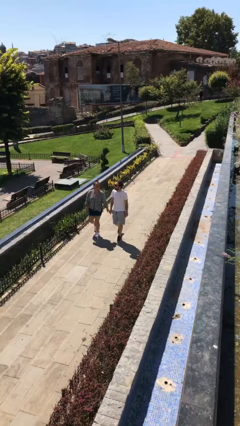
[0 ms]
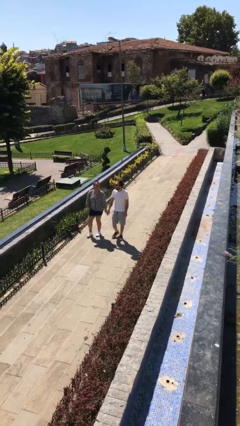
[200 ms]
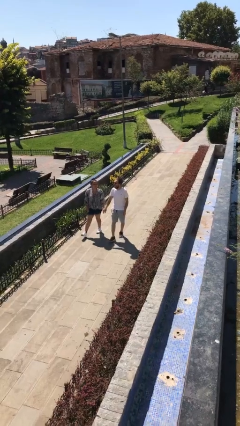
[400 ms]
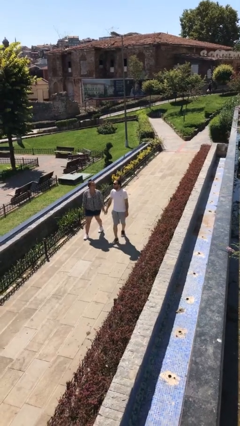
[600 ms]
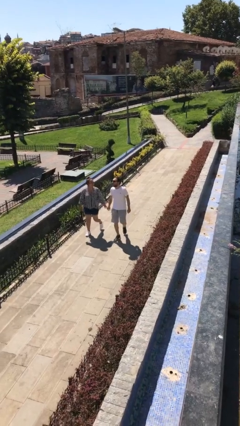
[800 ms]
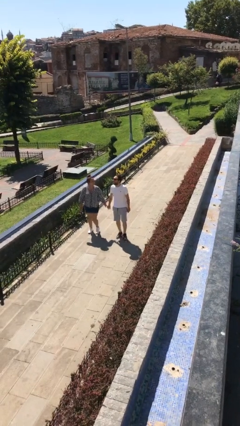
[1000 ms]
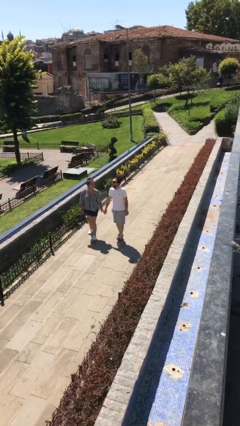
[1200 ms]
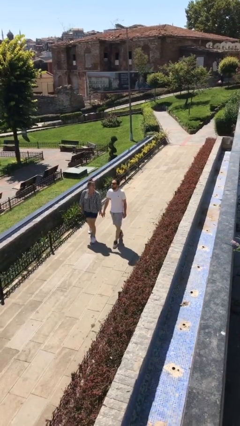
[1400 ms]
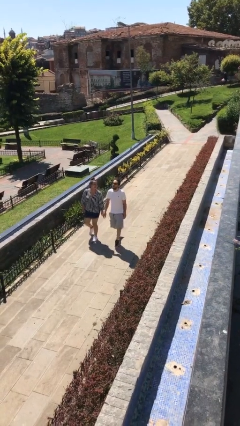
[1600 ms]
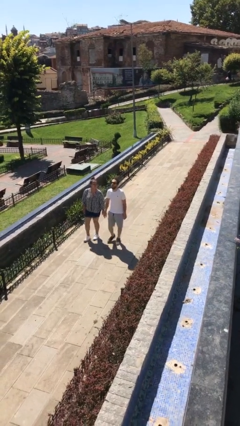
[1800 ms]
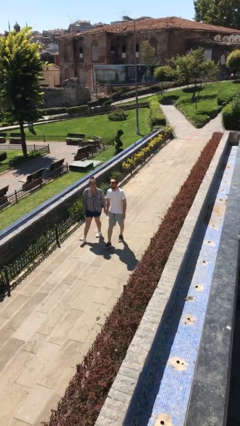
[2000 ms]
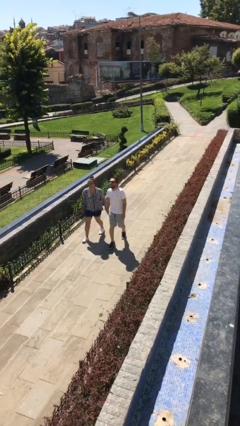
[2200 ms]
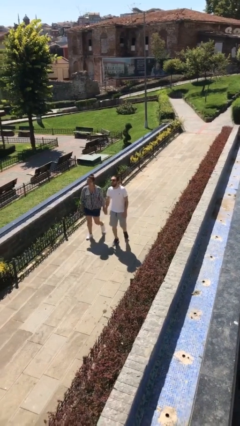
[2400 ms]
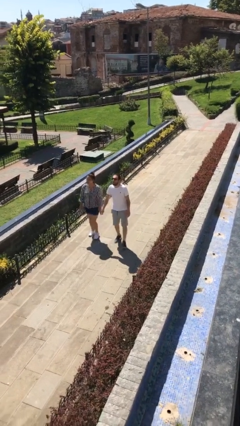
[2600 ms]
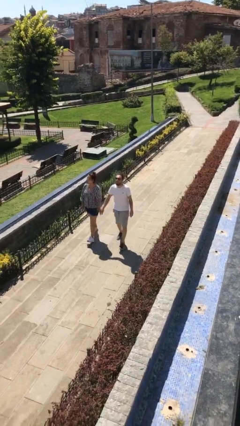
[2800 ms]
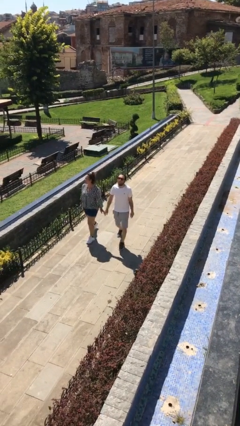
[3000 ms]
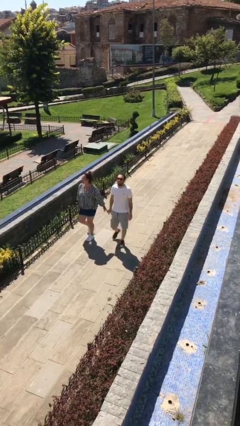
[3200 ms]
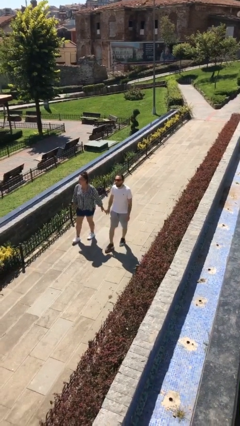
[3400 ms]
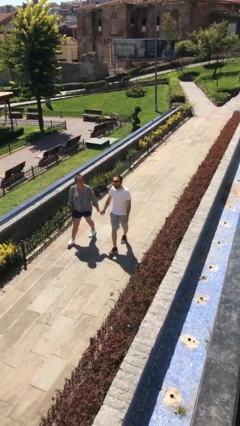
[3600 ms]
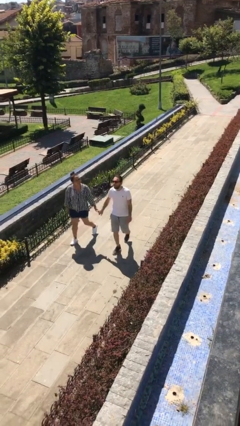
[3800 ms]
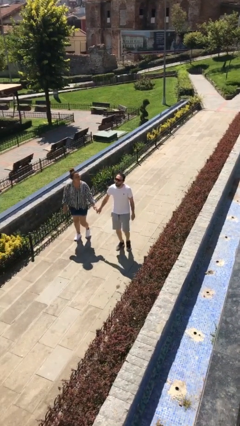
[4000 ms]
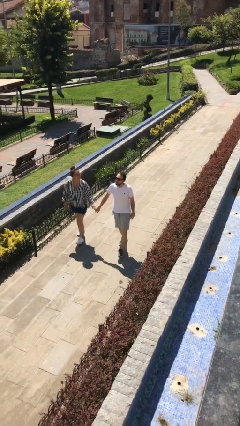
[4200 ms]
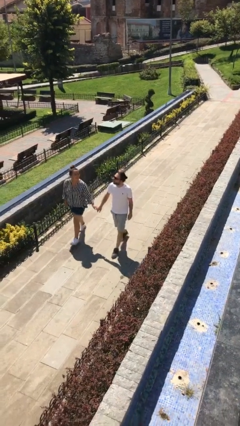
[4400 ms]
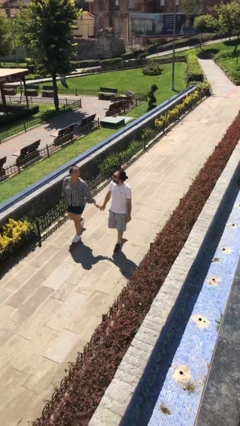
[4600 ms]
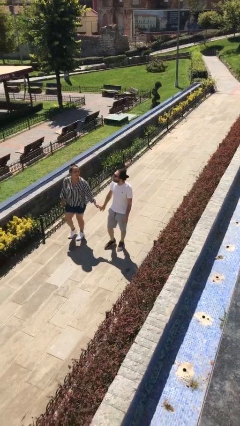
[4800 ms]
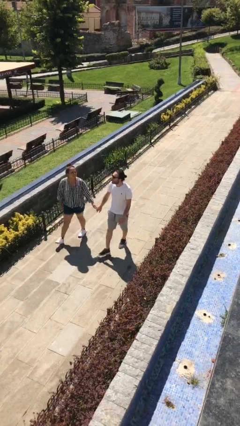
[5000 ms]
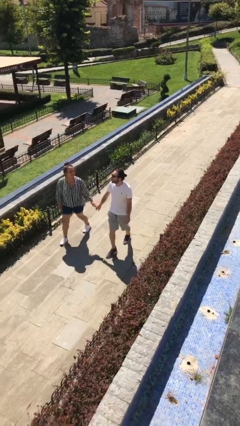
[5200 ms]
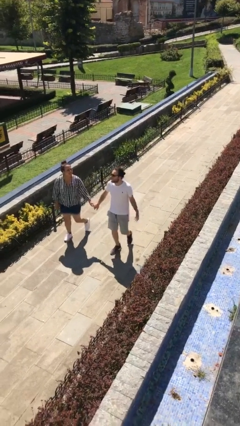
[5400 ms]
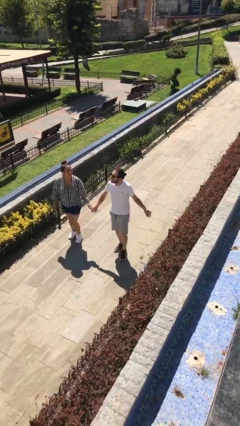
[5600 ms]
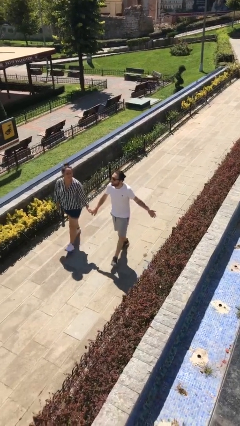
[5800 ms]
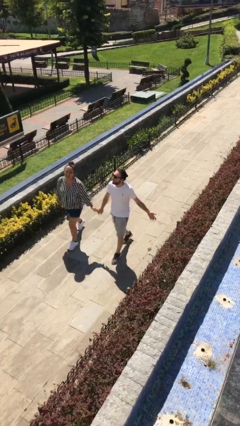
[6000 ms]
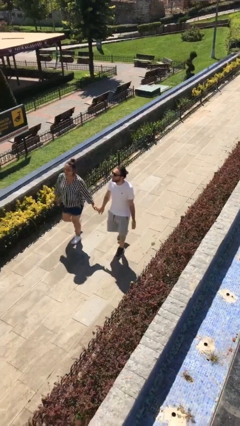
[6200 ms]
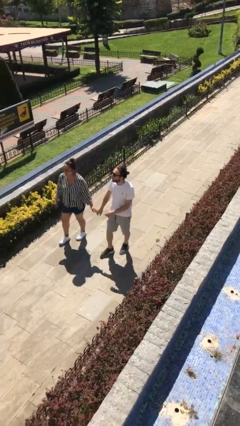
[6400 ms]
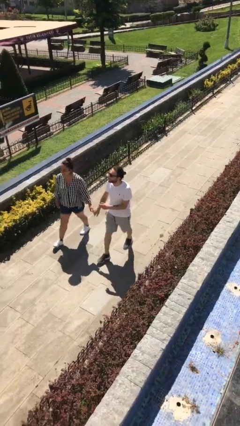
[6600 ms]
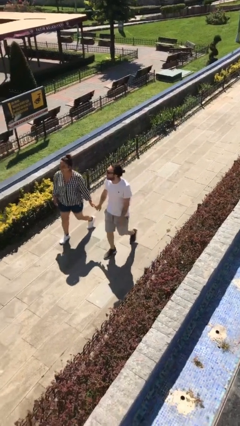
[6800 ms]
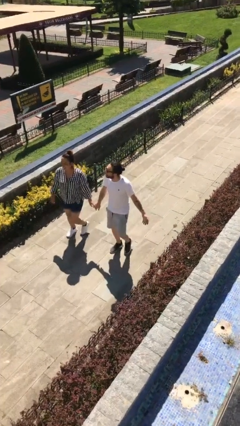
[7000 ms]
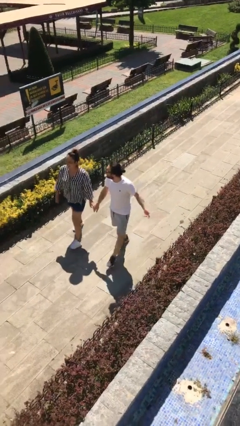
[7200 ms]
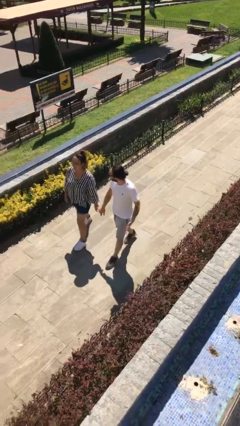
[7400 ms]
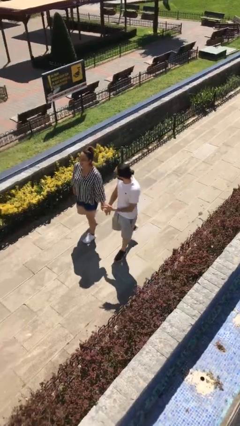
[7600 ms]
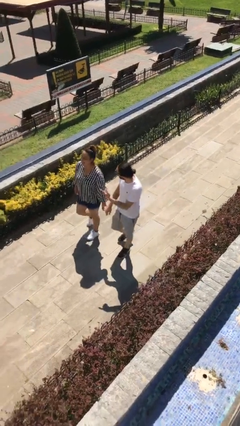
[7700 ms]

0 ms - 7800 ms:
person holds hand

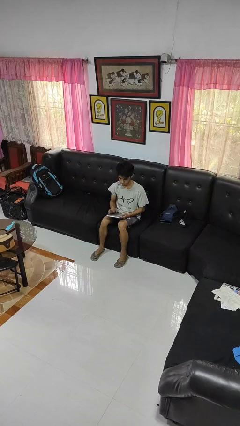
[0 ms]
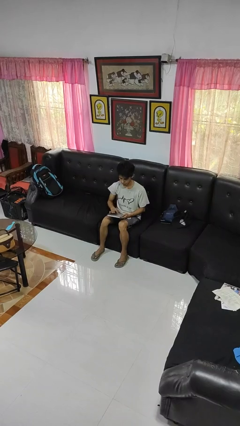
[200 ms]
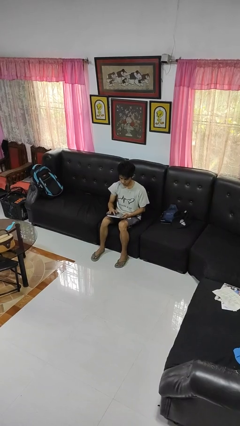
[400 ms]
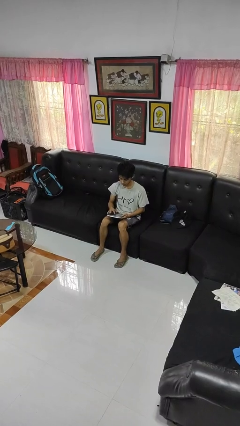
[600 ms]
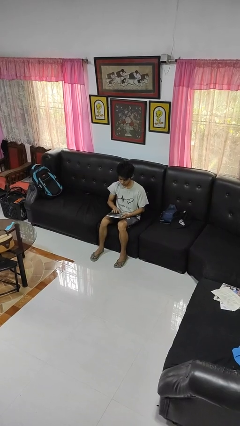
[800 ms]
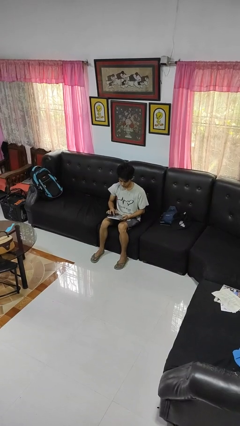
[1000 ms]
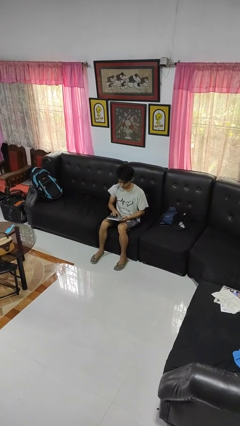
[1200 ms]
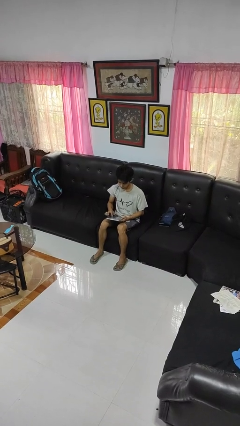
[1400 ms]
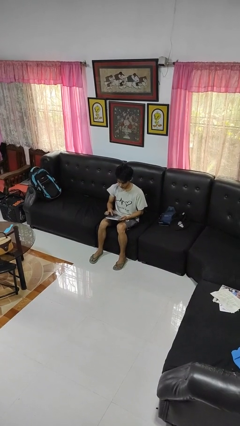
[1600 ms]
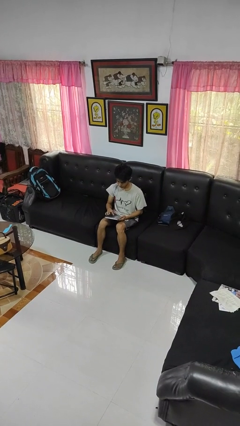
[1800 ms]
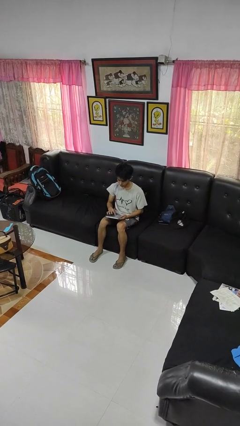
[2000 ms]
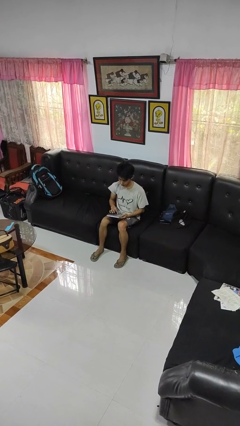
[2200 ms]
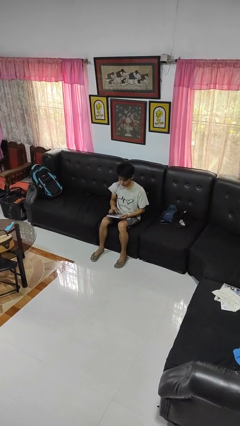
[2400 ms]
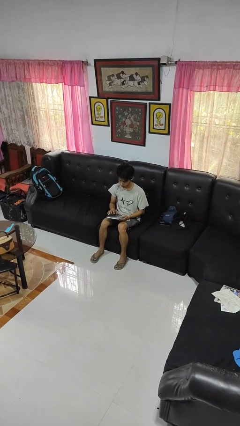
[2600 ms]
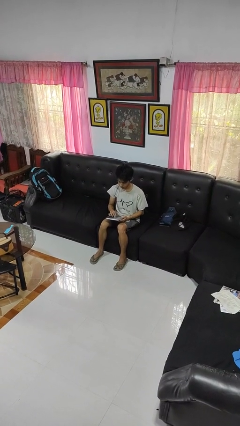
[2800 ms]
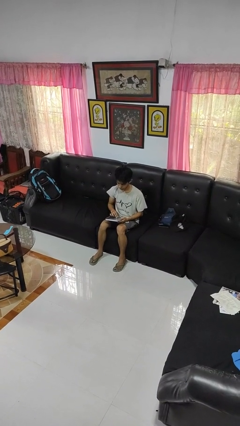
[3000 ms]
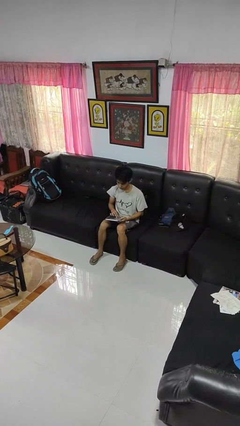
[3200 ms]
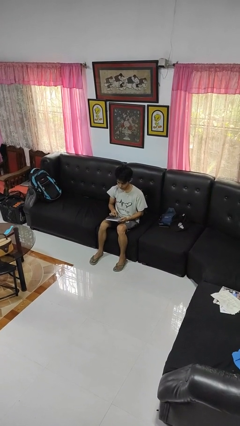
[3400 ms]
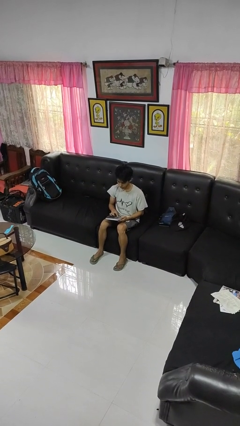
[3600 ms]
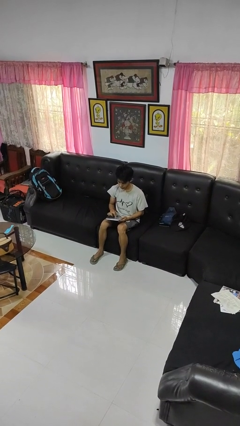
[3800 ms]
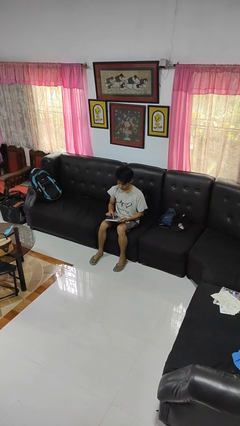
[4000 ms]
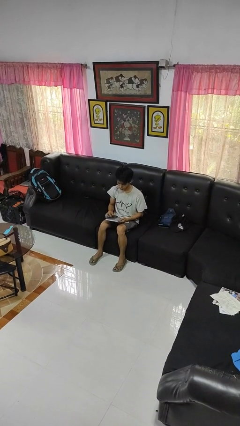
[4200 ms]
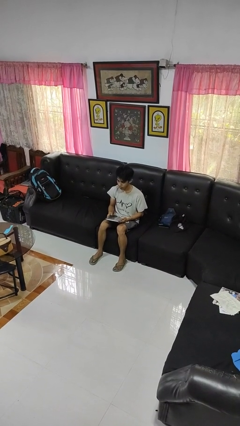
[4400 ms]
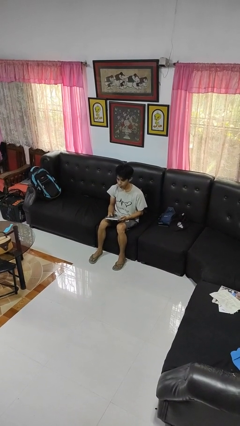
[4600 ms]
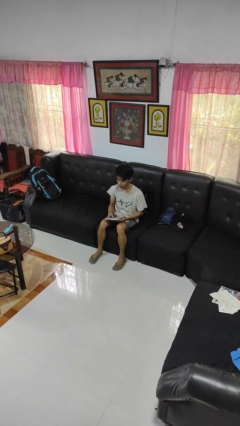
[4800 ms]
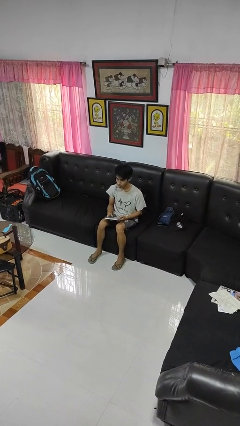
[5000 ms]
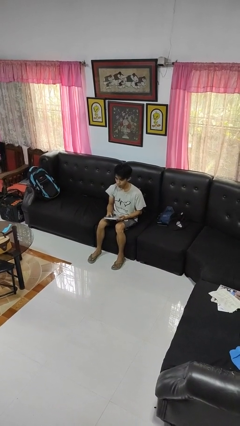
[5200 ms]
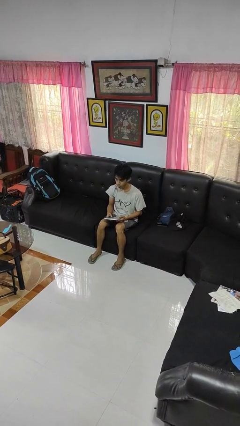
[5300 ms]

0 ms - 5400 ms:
person interacts with tablet

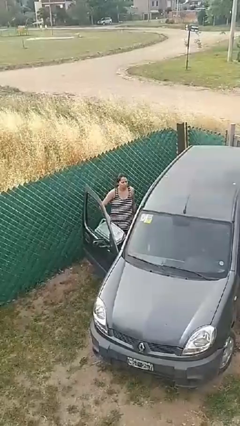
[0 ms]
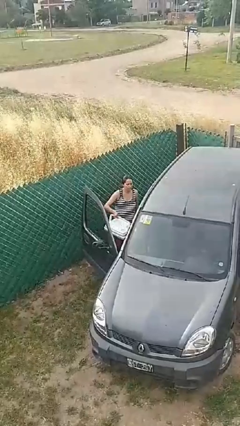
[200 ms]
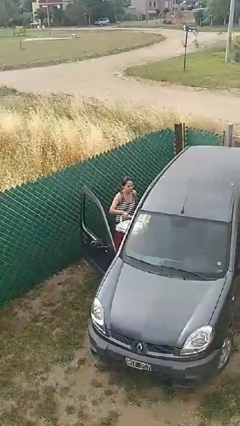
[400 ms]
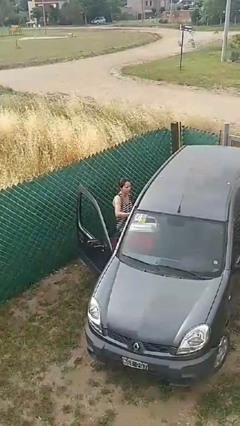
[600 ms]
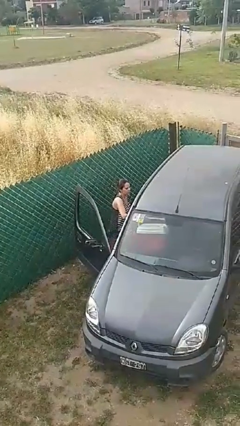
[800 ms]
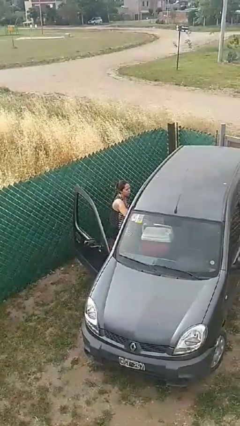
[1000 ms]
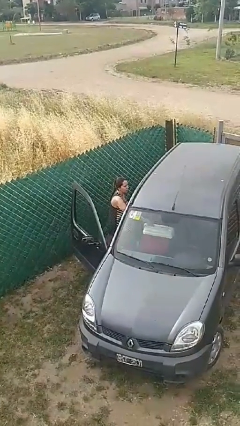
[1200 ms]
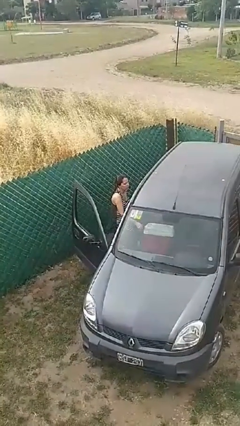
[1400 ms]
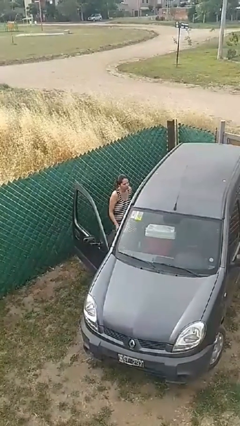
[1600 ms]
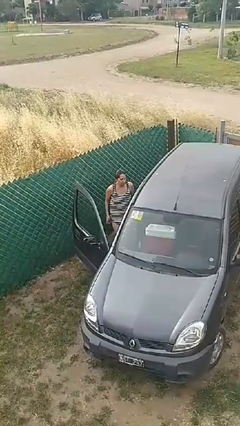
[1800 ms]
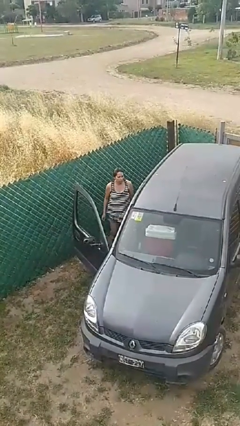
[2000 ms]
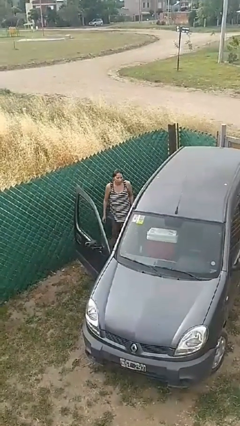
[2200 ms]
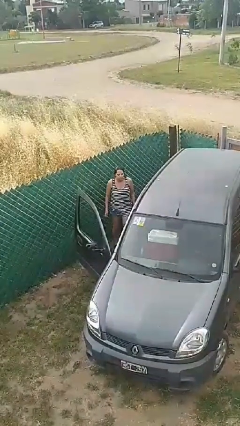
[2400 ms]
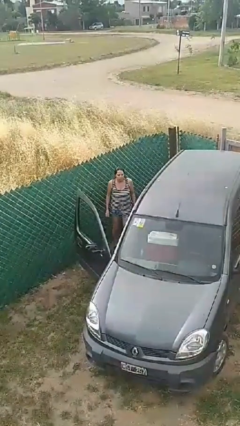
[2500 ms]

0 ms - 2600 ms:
person loads car

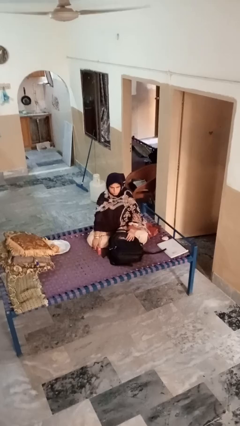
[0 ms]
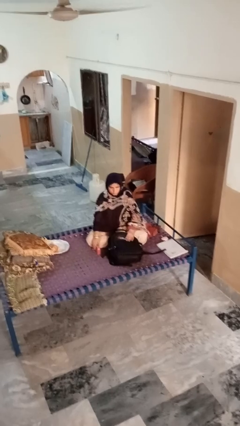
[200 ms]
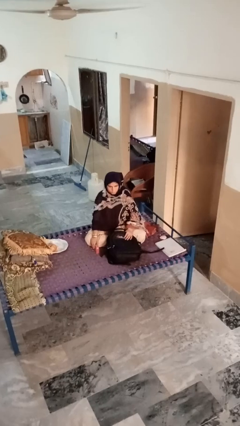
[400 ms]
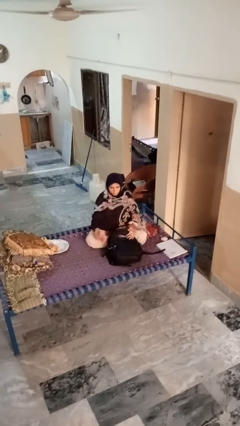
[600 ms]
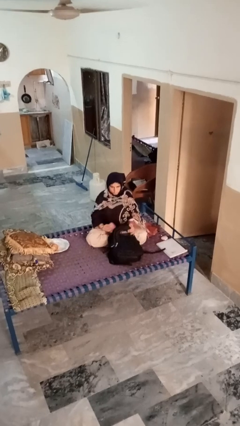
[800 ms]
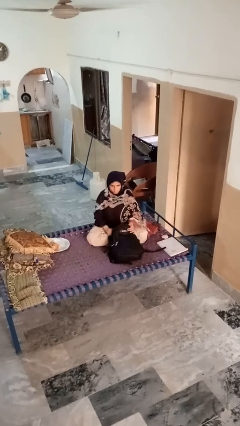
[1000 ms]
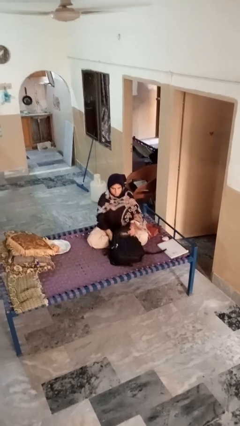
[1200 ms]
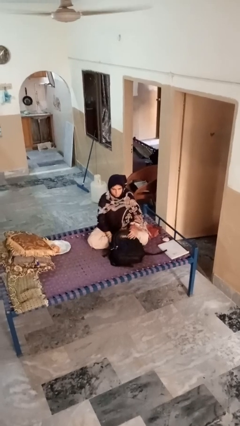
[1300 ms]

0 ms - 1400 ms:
person puts object into bag

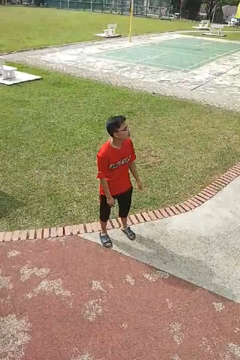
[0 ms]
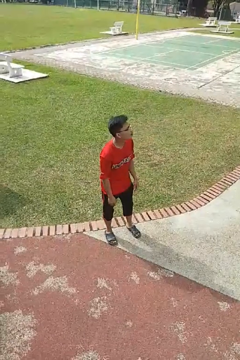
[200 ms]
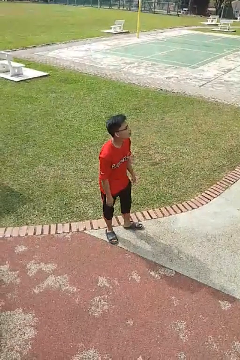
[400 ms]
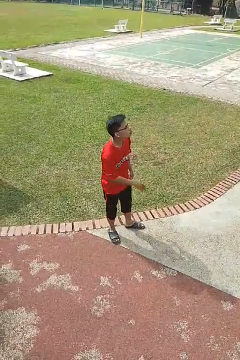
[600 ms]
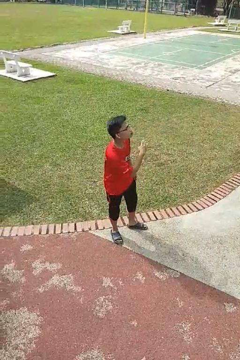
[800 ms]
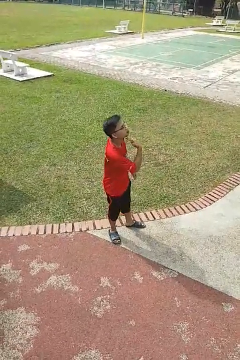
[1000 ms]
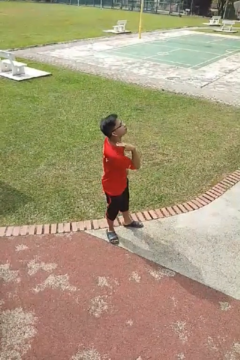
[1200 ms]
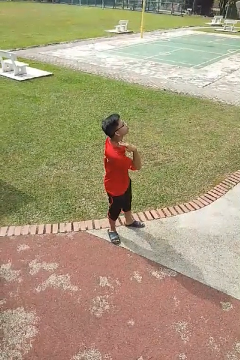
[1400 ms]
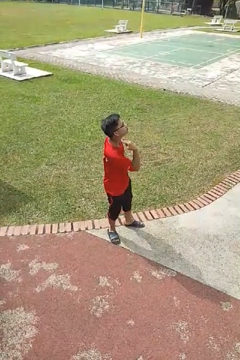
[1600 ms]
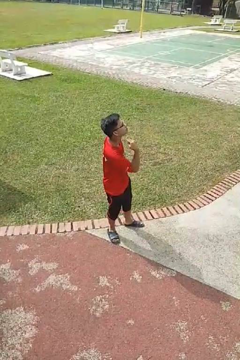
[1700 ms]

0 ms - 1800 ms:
person gestures cut
